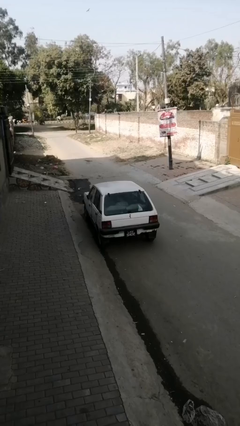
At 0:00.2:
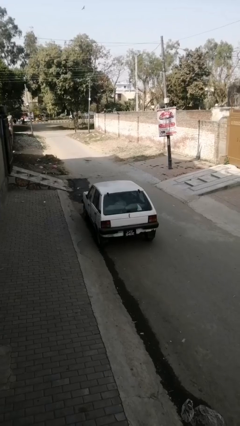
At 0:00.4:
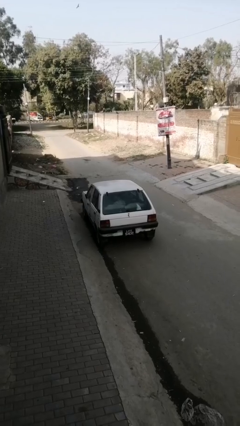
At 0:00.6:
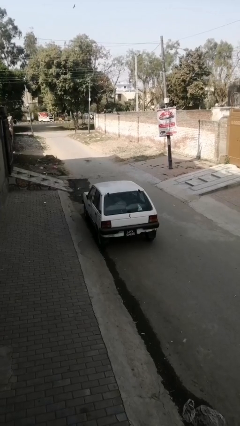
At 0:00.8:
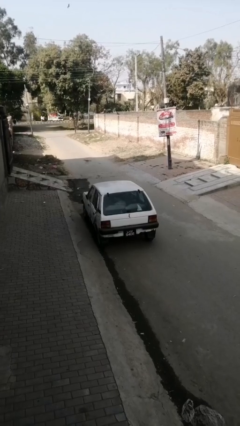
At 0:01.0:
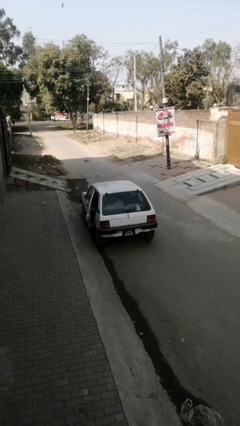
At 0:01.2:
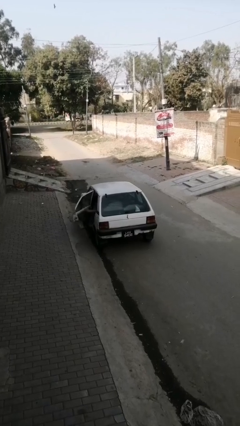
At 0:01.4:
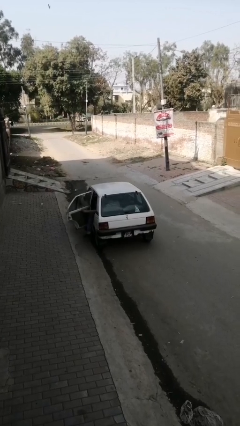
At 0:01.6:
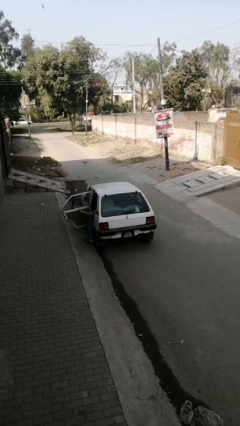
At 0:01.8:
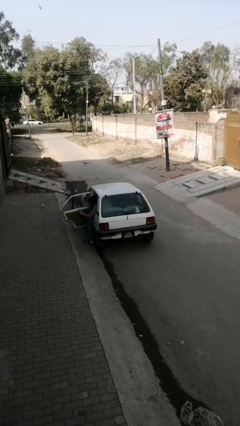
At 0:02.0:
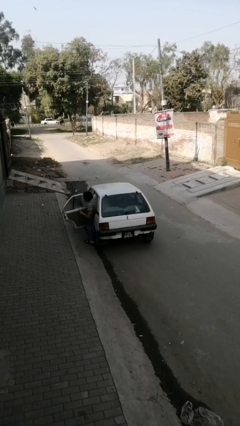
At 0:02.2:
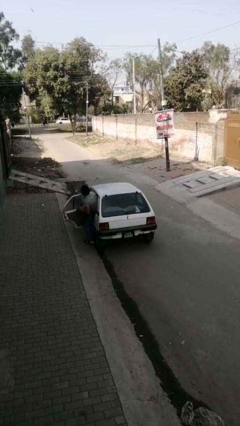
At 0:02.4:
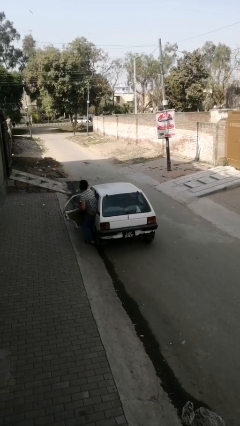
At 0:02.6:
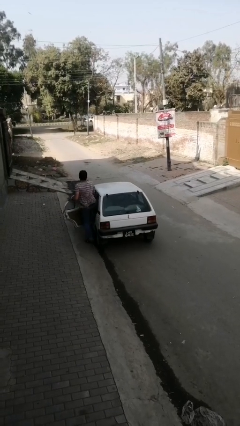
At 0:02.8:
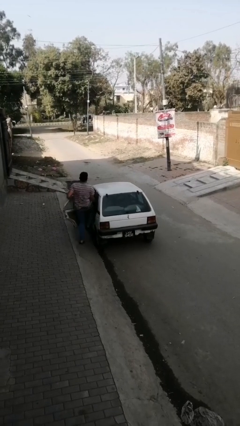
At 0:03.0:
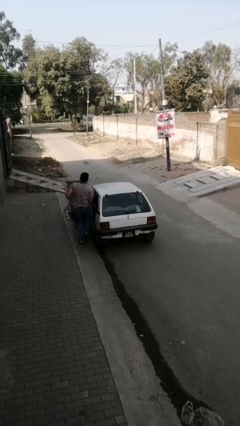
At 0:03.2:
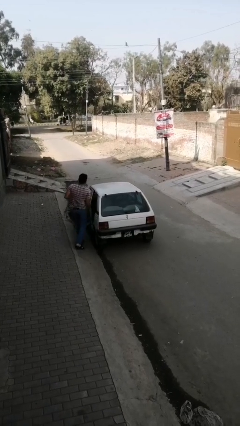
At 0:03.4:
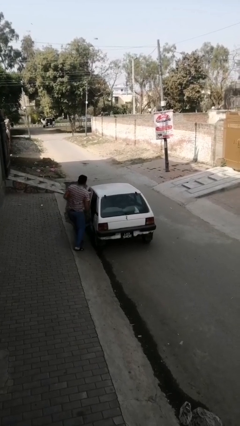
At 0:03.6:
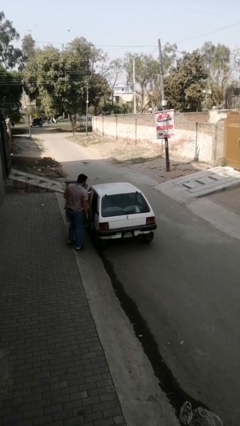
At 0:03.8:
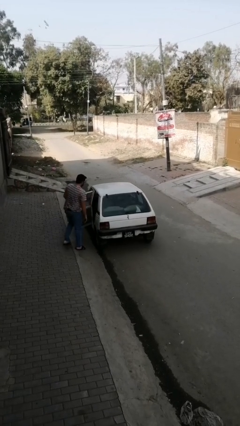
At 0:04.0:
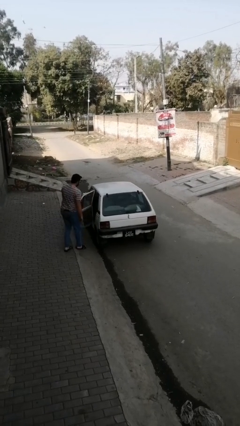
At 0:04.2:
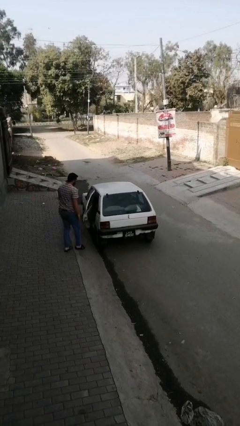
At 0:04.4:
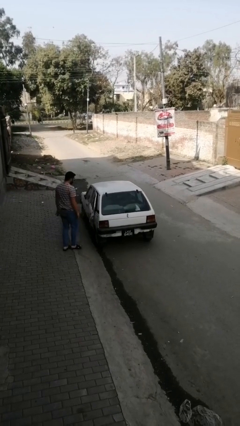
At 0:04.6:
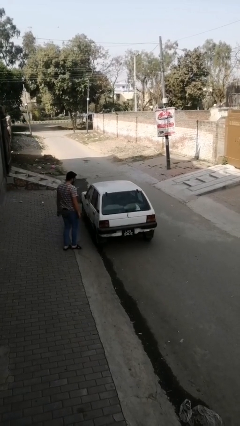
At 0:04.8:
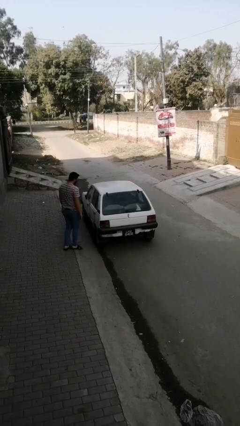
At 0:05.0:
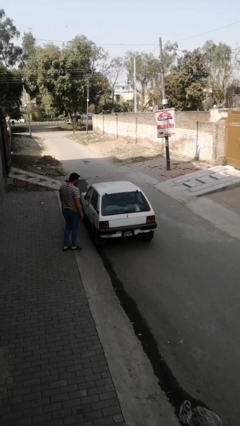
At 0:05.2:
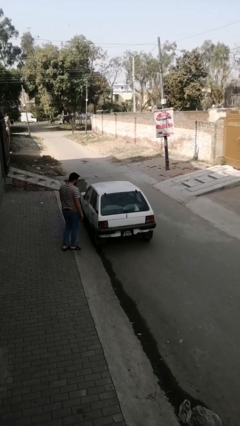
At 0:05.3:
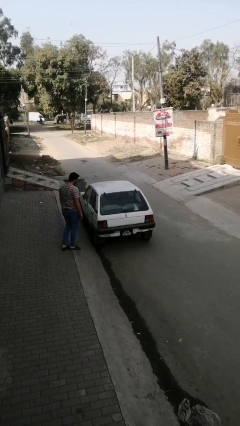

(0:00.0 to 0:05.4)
car drops off person

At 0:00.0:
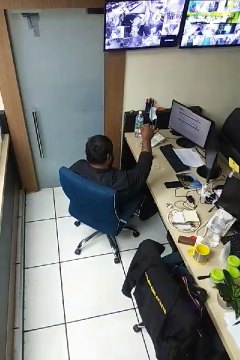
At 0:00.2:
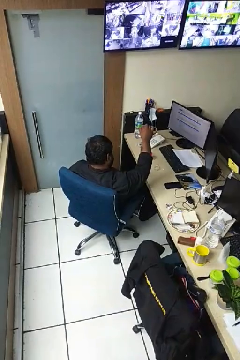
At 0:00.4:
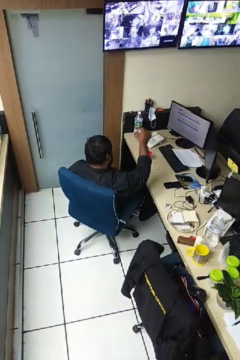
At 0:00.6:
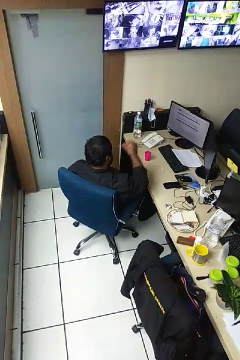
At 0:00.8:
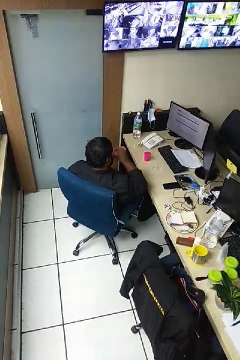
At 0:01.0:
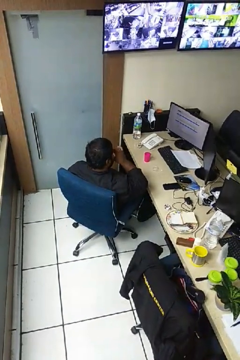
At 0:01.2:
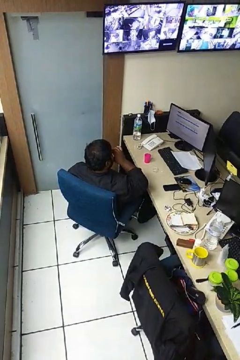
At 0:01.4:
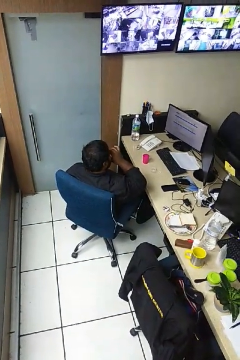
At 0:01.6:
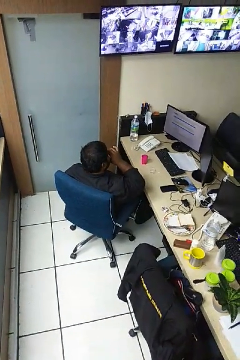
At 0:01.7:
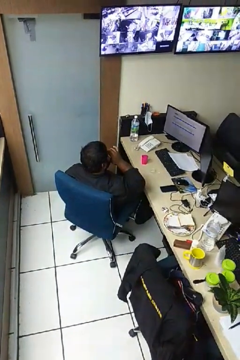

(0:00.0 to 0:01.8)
person drinks from shotglass

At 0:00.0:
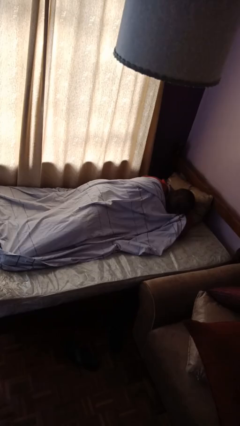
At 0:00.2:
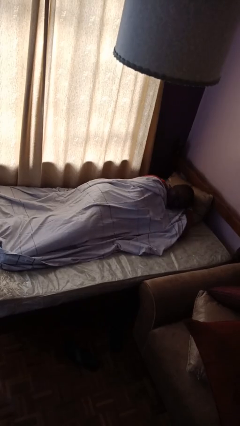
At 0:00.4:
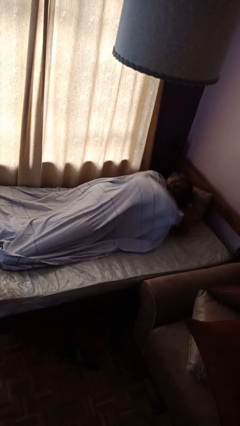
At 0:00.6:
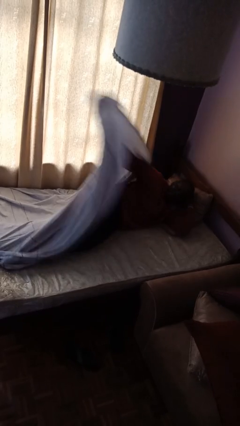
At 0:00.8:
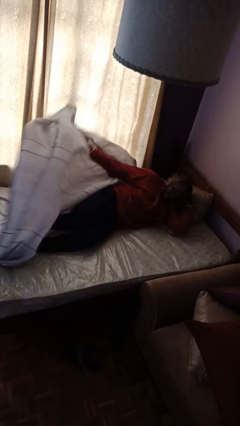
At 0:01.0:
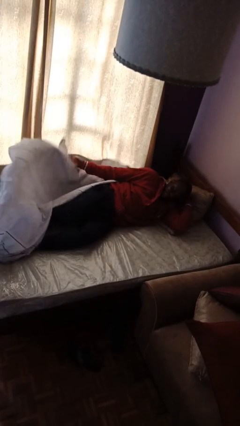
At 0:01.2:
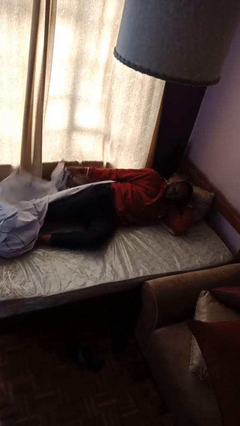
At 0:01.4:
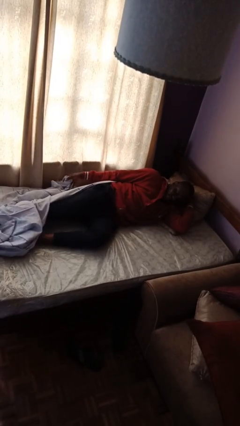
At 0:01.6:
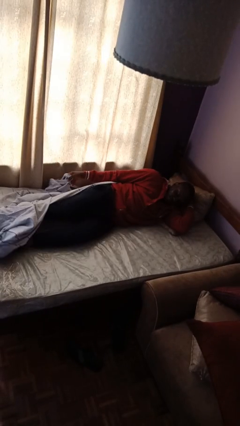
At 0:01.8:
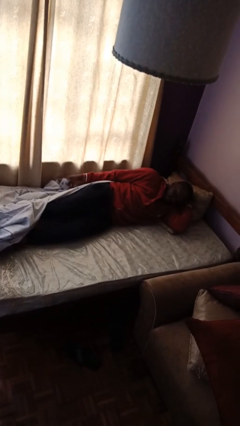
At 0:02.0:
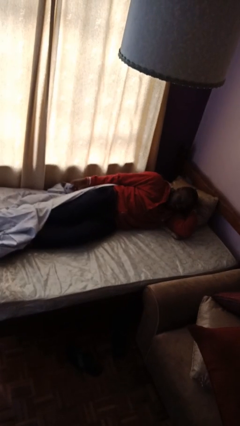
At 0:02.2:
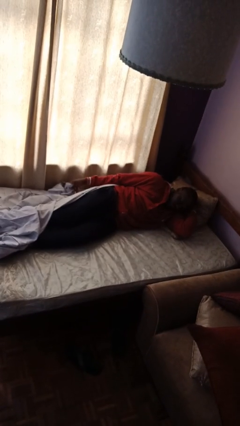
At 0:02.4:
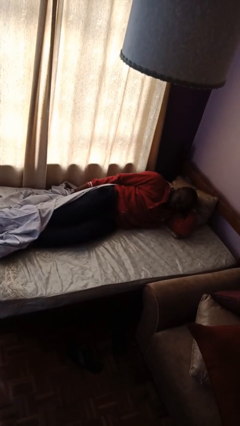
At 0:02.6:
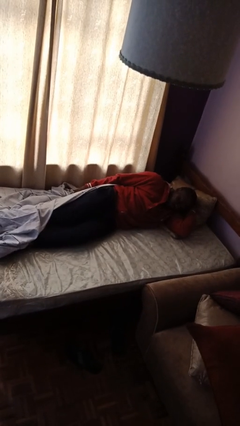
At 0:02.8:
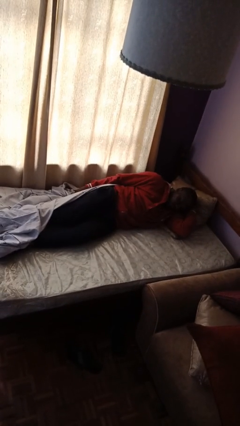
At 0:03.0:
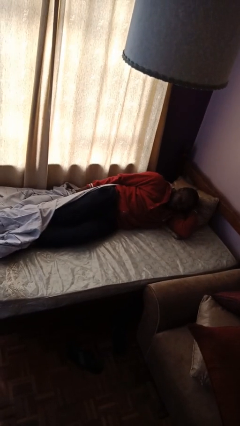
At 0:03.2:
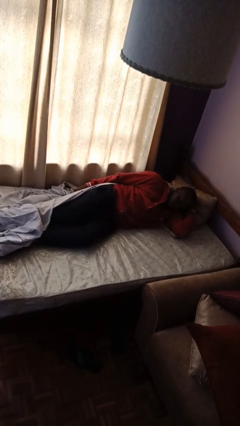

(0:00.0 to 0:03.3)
person uncovers with bedsheets

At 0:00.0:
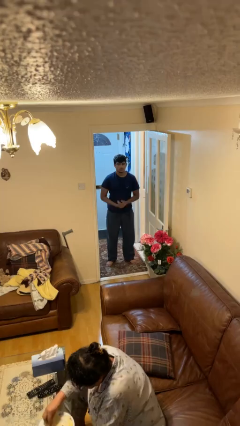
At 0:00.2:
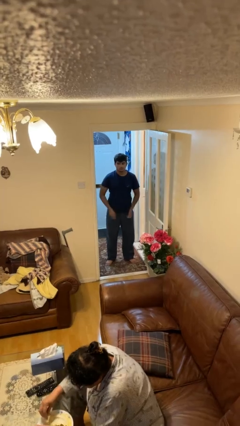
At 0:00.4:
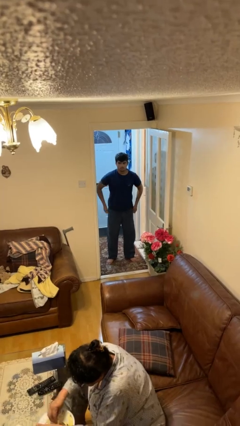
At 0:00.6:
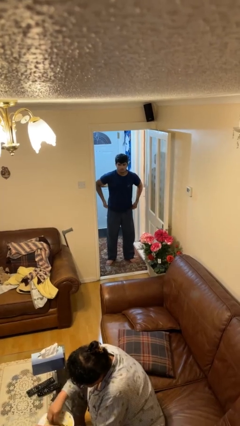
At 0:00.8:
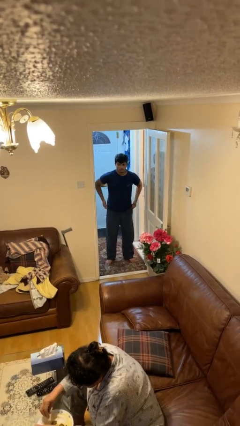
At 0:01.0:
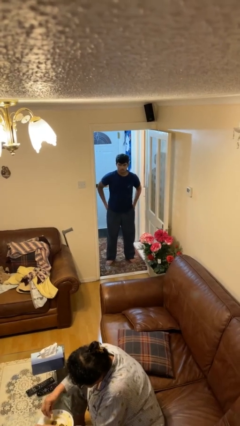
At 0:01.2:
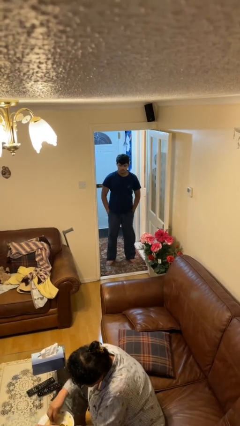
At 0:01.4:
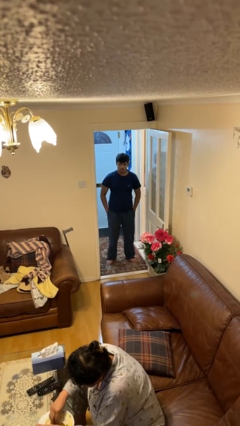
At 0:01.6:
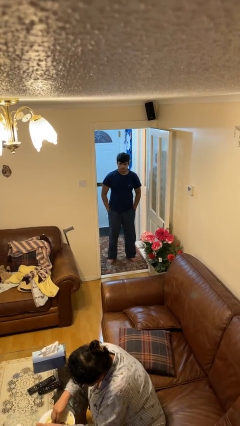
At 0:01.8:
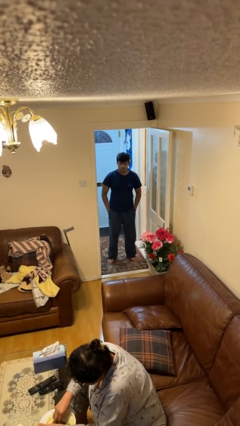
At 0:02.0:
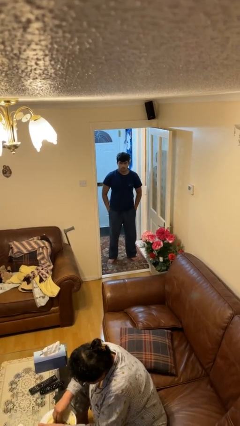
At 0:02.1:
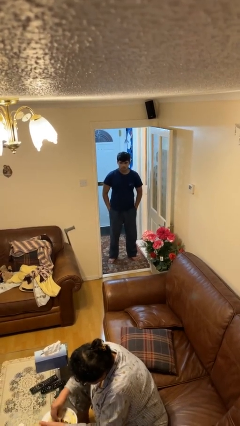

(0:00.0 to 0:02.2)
person puts hands in back pockets

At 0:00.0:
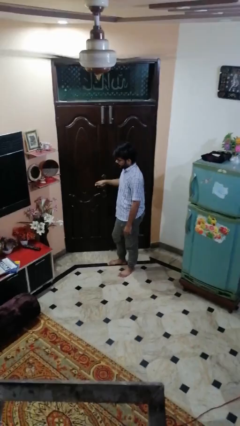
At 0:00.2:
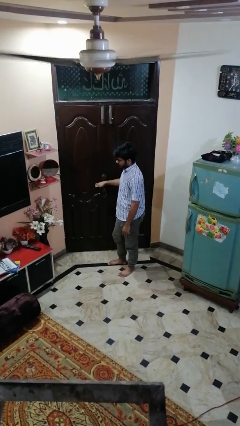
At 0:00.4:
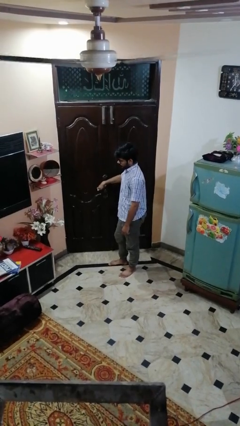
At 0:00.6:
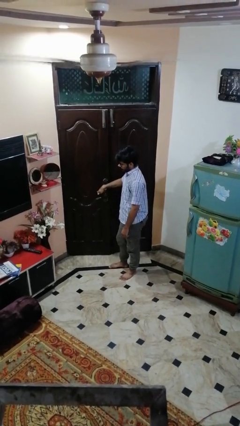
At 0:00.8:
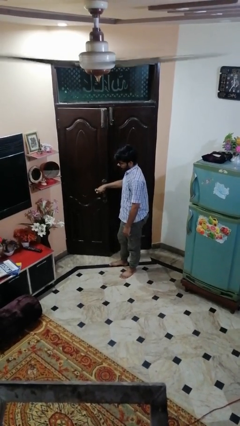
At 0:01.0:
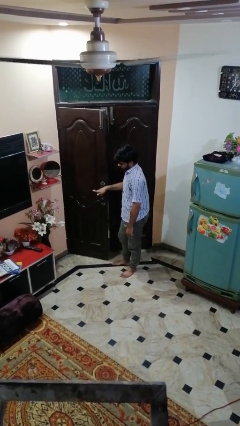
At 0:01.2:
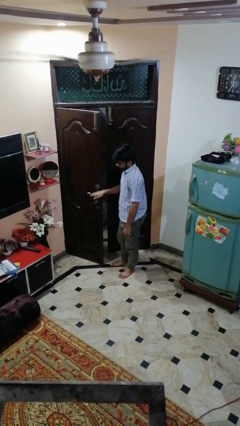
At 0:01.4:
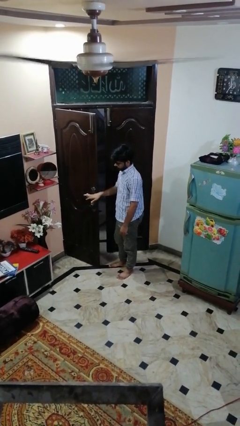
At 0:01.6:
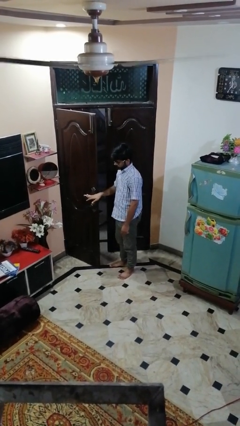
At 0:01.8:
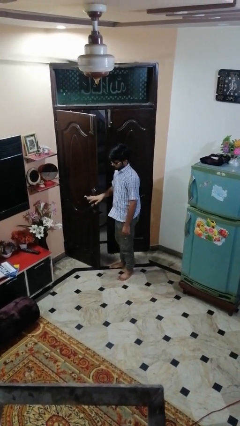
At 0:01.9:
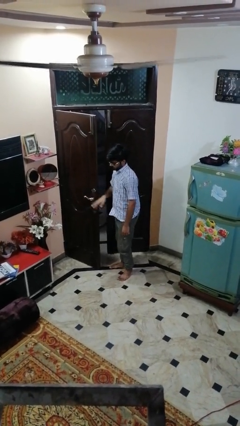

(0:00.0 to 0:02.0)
person opens facility door

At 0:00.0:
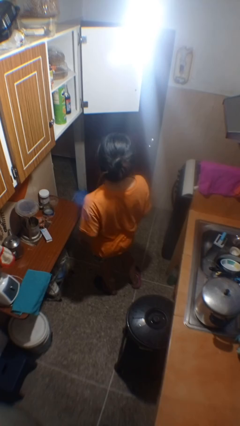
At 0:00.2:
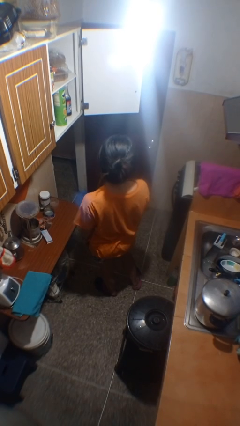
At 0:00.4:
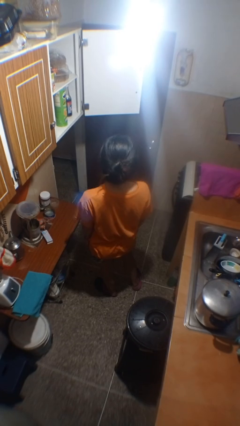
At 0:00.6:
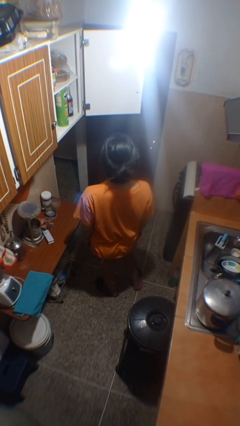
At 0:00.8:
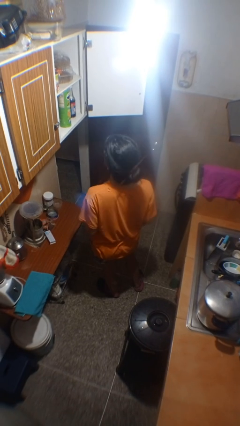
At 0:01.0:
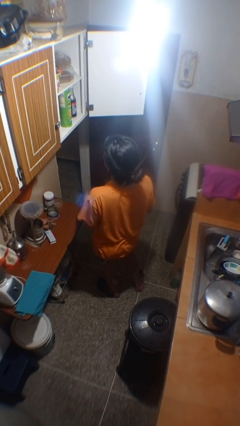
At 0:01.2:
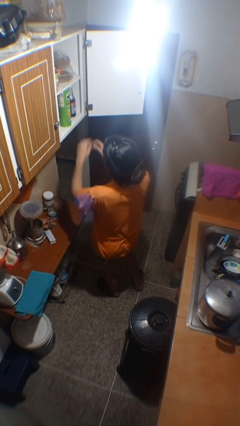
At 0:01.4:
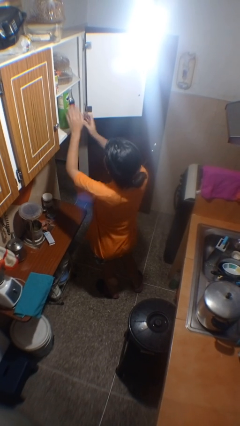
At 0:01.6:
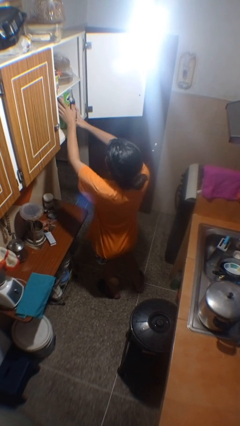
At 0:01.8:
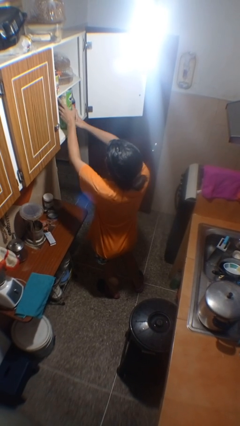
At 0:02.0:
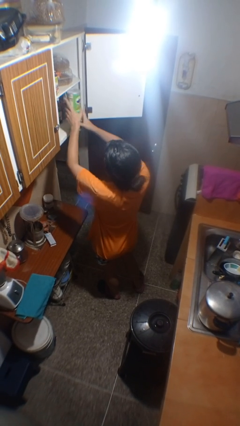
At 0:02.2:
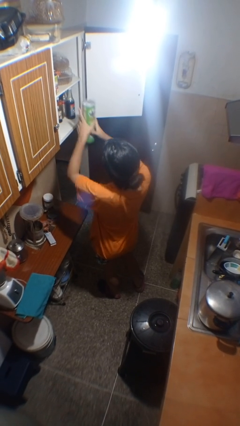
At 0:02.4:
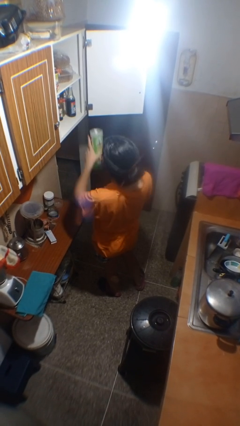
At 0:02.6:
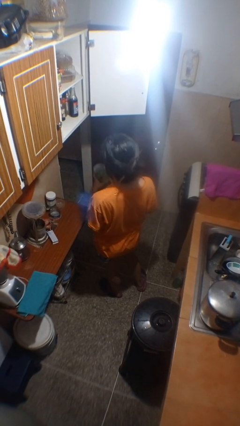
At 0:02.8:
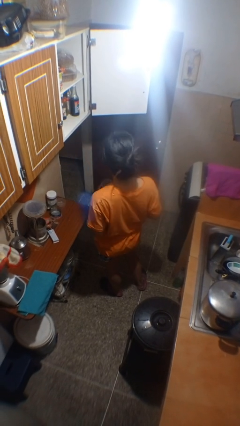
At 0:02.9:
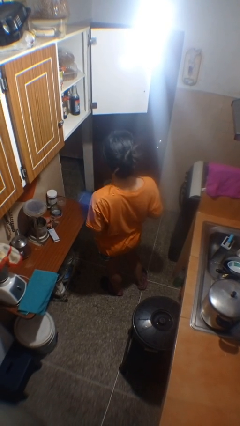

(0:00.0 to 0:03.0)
person takes object from cabinet
